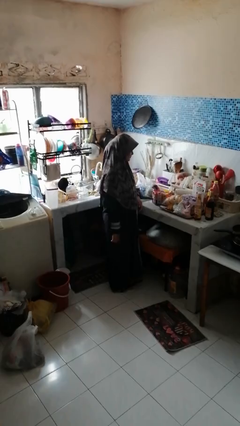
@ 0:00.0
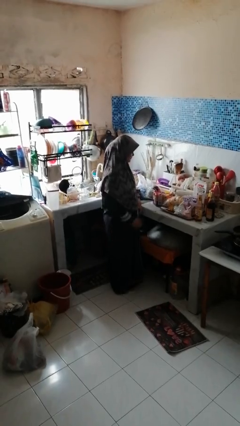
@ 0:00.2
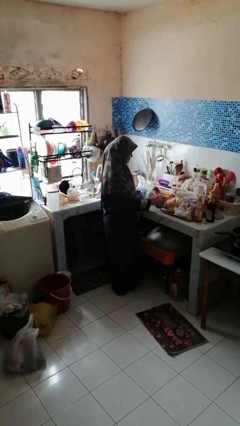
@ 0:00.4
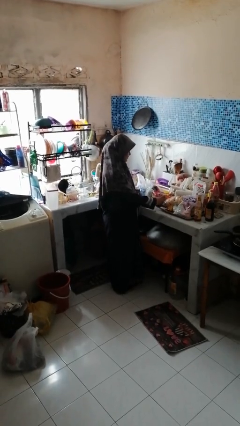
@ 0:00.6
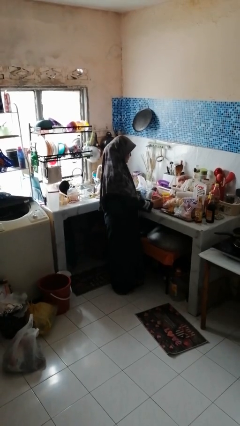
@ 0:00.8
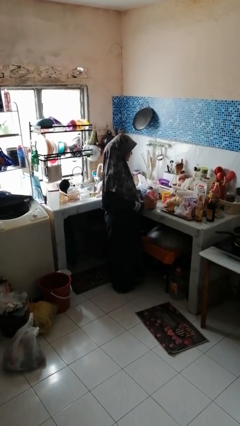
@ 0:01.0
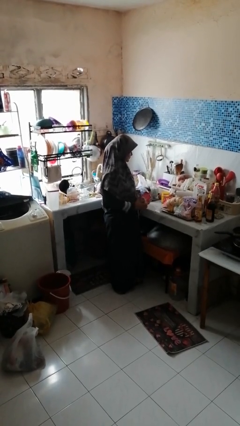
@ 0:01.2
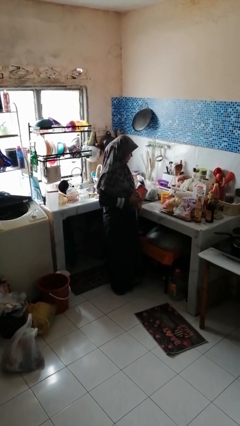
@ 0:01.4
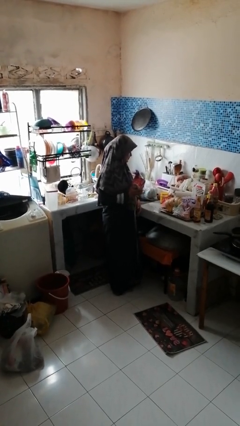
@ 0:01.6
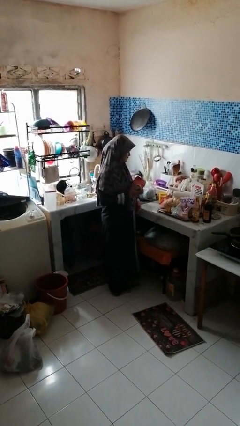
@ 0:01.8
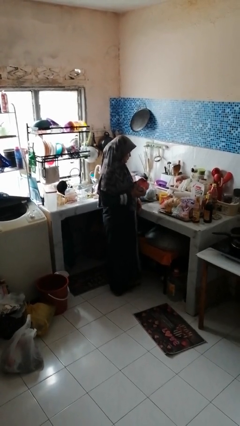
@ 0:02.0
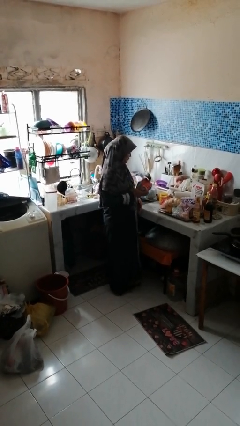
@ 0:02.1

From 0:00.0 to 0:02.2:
person picks up object from countertop

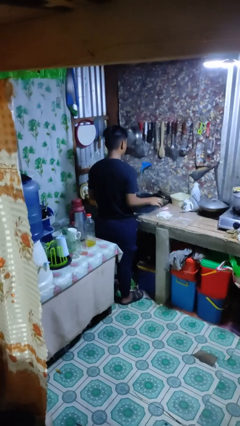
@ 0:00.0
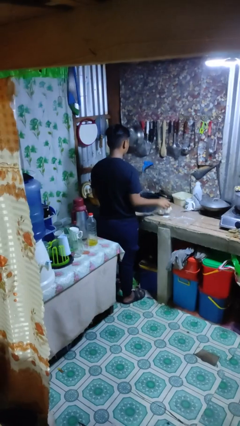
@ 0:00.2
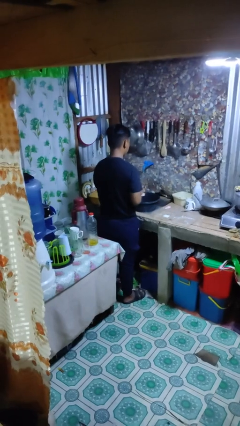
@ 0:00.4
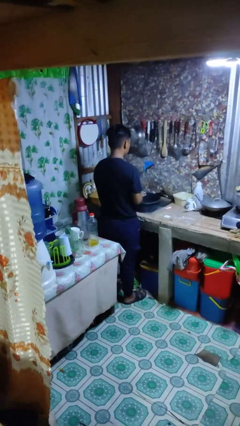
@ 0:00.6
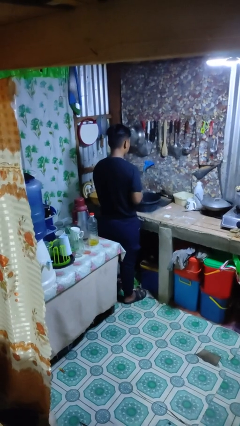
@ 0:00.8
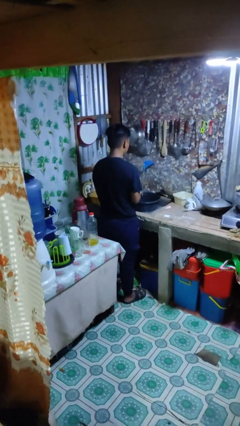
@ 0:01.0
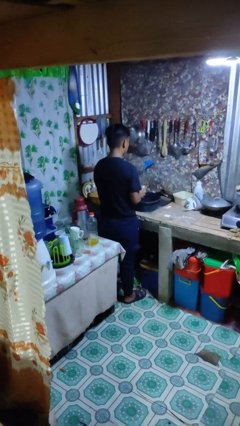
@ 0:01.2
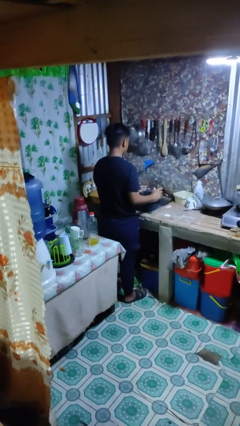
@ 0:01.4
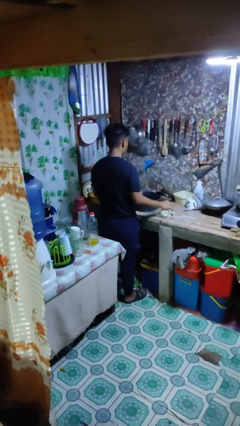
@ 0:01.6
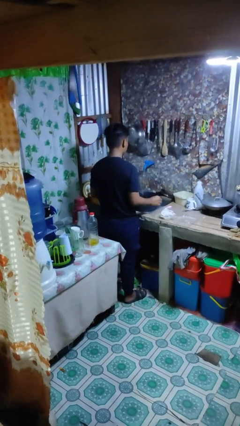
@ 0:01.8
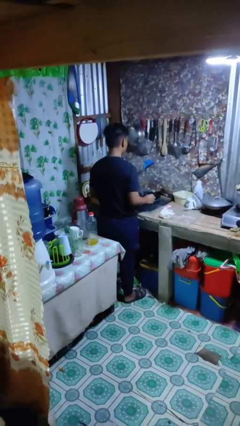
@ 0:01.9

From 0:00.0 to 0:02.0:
person dries hands with towel

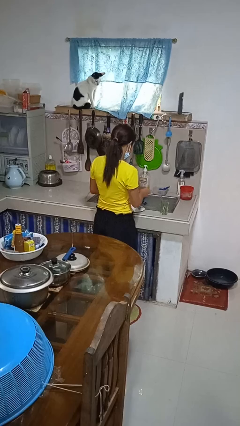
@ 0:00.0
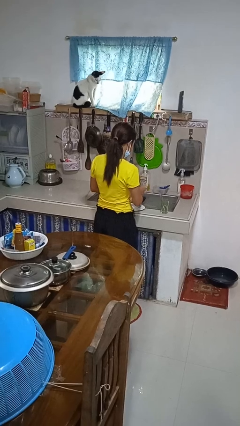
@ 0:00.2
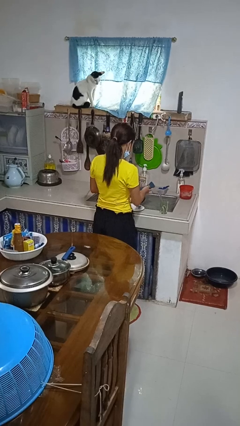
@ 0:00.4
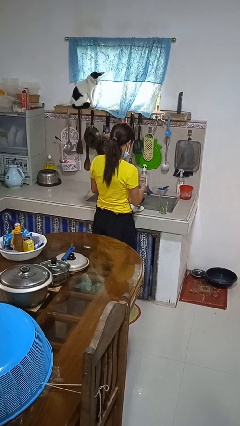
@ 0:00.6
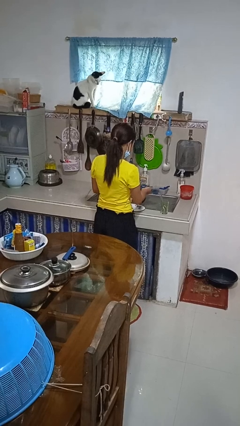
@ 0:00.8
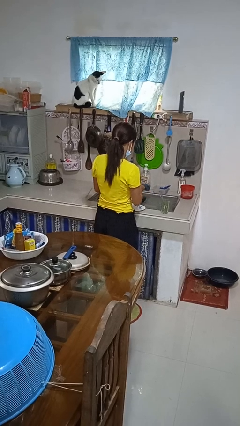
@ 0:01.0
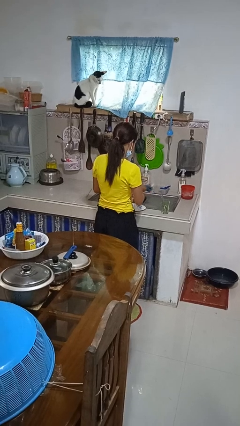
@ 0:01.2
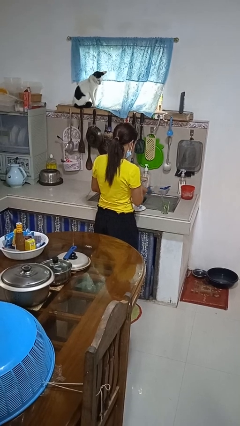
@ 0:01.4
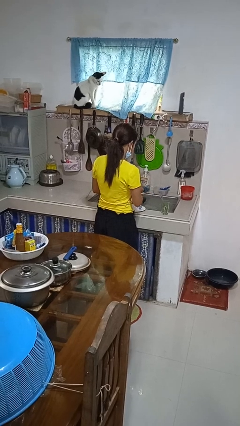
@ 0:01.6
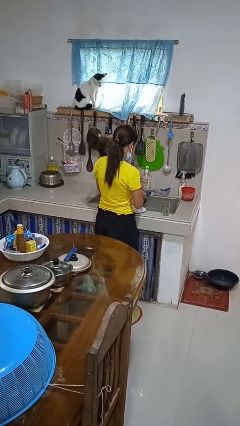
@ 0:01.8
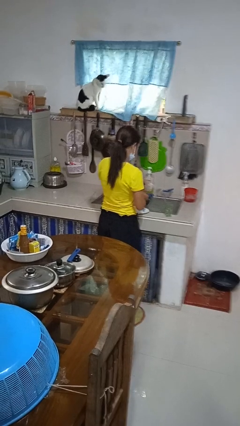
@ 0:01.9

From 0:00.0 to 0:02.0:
person dries dish

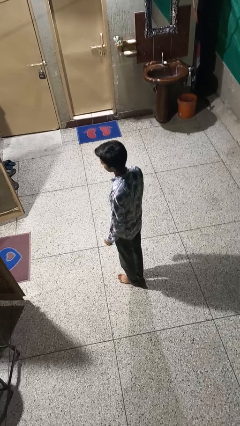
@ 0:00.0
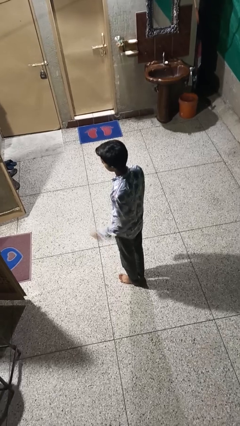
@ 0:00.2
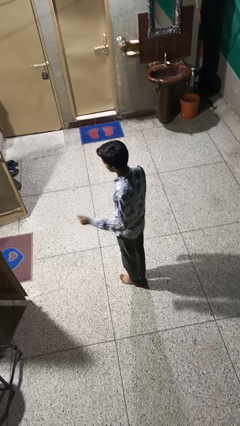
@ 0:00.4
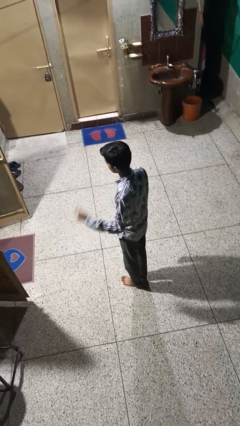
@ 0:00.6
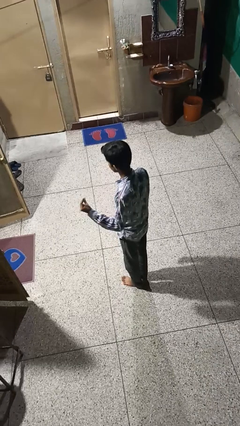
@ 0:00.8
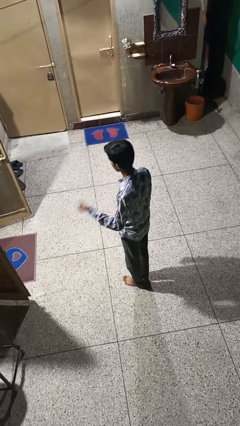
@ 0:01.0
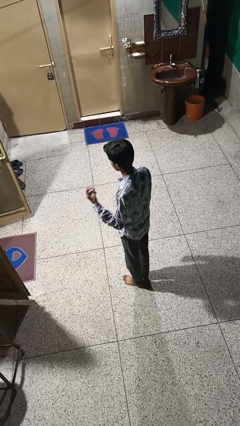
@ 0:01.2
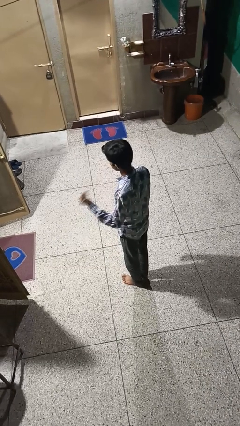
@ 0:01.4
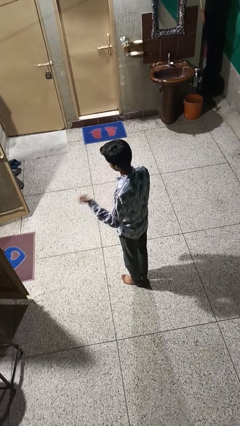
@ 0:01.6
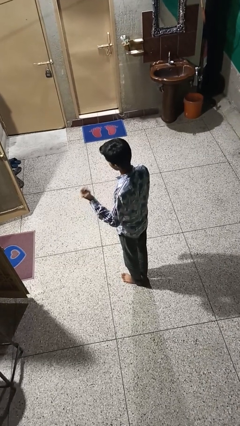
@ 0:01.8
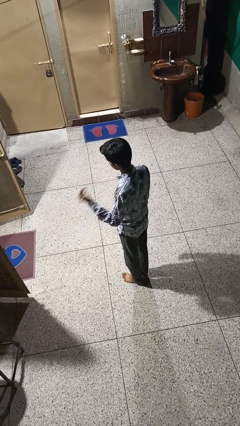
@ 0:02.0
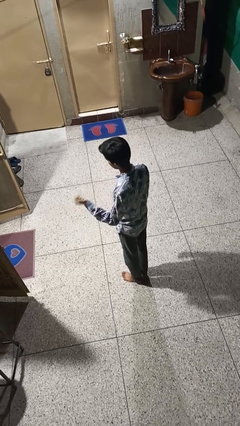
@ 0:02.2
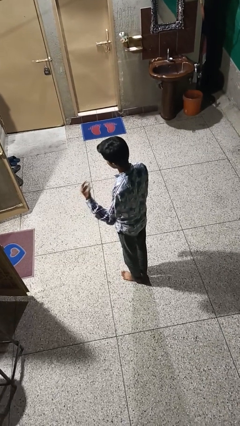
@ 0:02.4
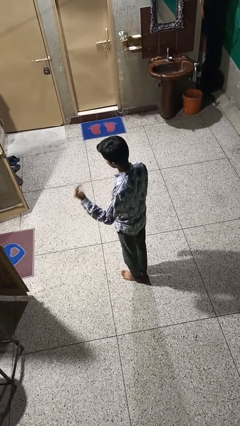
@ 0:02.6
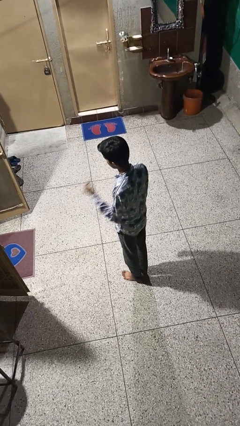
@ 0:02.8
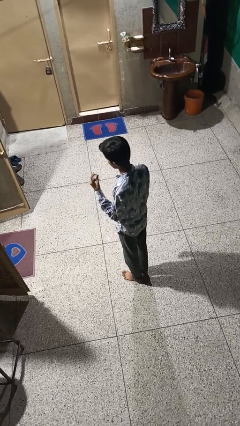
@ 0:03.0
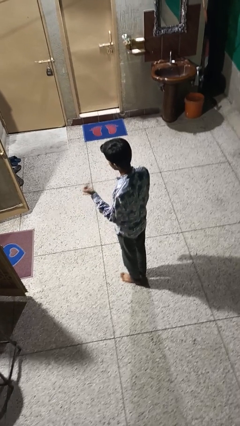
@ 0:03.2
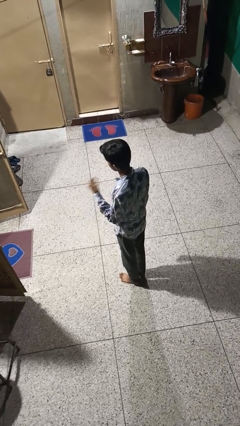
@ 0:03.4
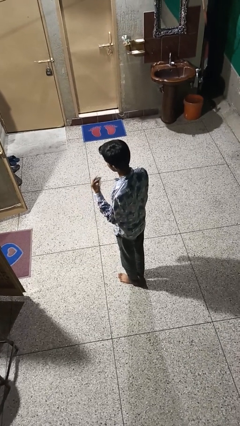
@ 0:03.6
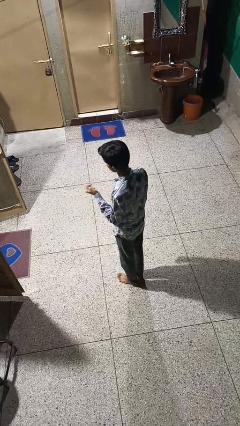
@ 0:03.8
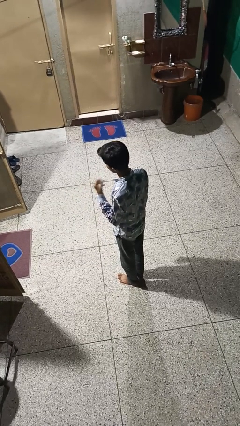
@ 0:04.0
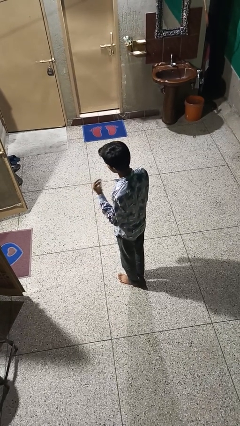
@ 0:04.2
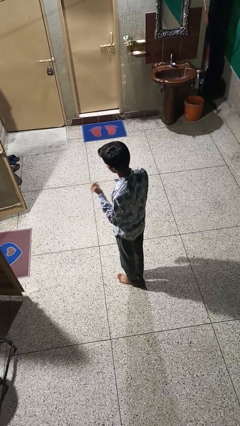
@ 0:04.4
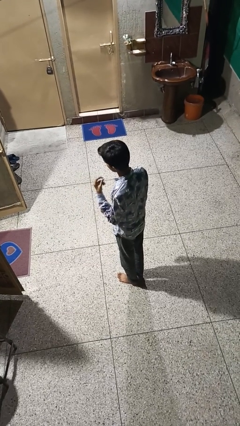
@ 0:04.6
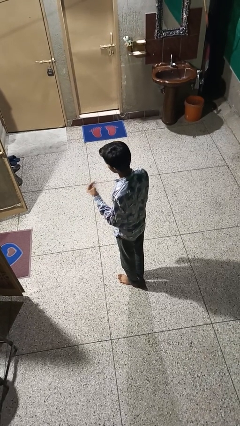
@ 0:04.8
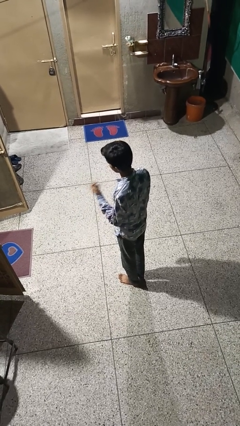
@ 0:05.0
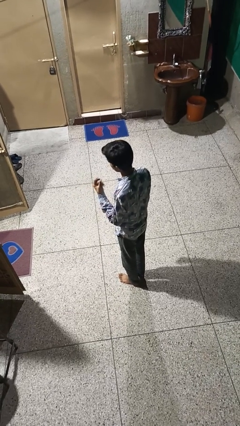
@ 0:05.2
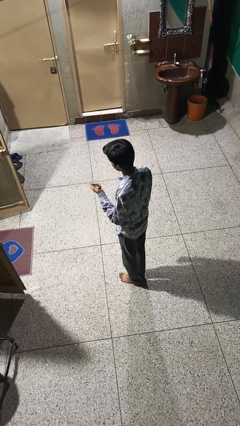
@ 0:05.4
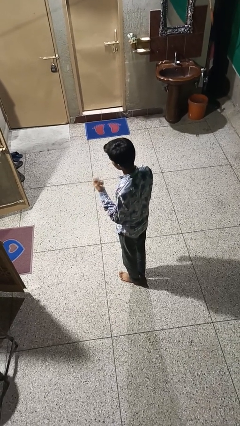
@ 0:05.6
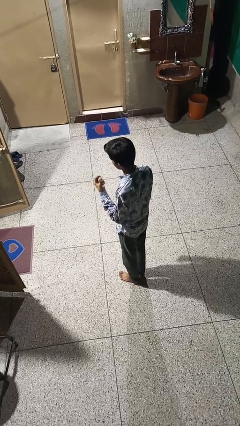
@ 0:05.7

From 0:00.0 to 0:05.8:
person snaps fingers

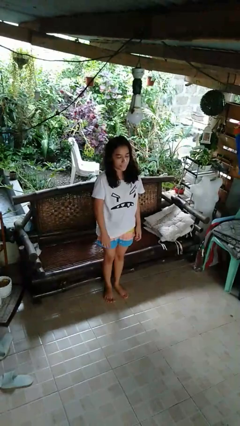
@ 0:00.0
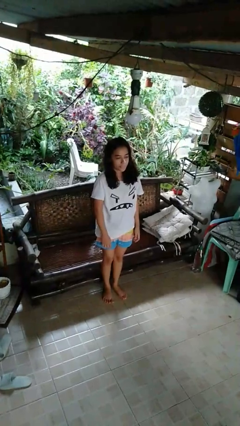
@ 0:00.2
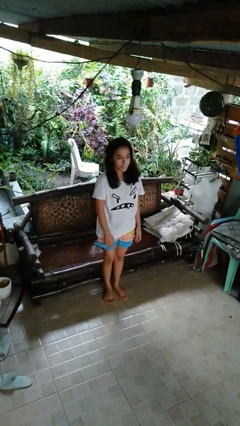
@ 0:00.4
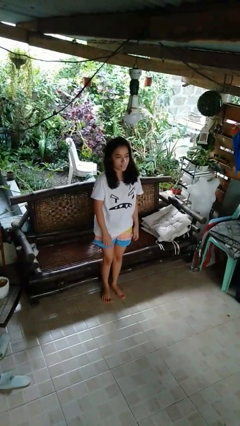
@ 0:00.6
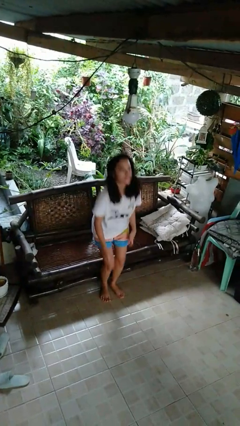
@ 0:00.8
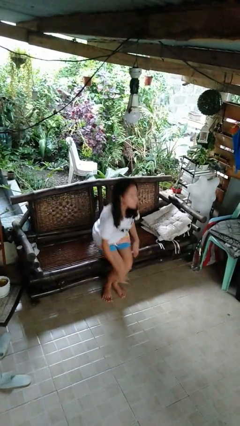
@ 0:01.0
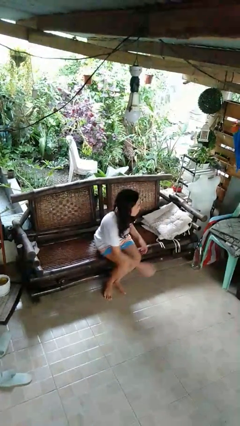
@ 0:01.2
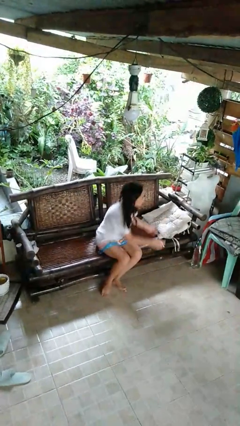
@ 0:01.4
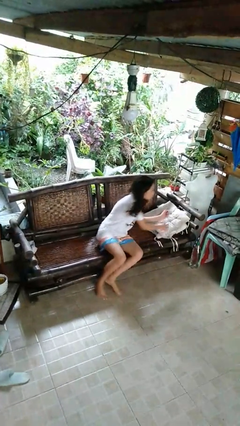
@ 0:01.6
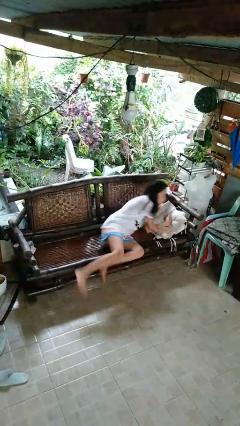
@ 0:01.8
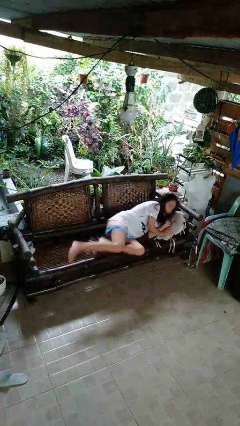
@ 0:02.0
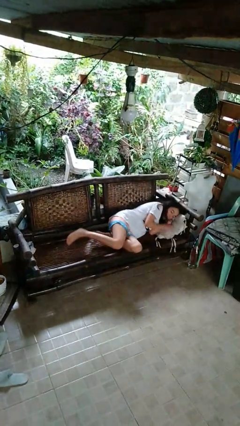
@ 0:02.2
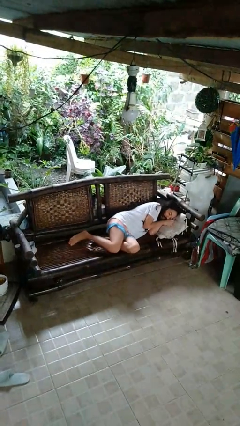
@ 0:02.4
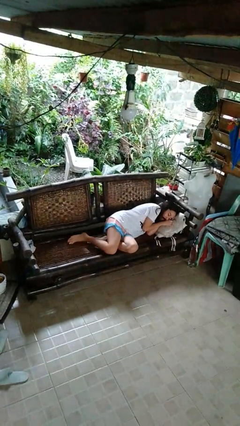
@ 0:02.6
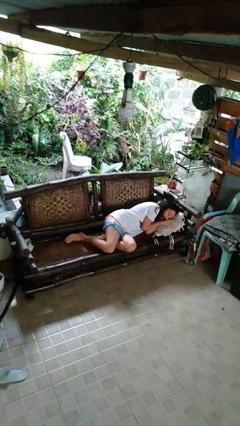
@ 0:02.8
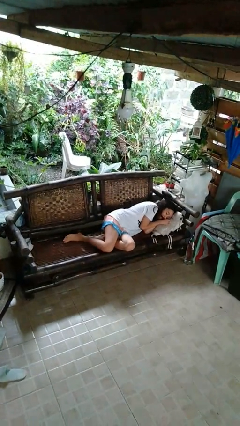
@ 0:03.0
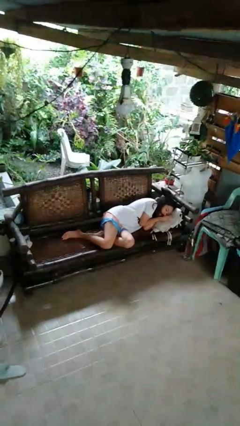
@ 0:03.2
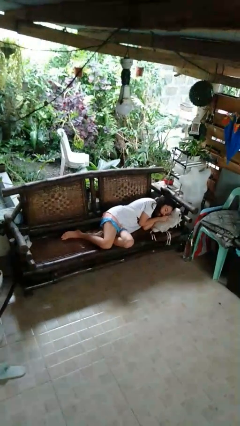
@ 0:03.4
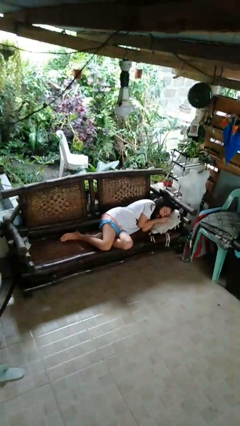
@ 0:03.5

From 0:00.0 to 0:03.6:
person lies down on couch

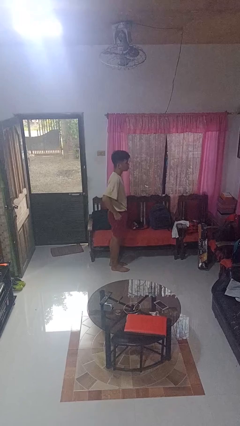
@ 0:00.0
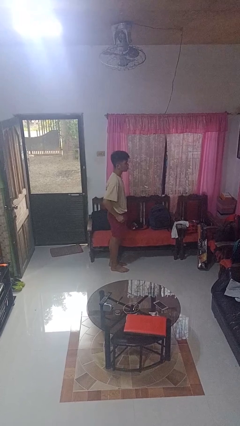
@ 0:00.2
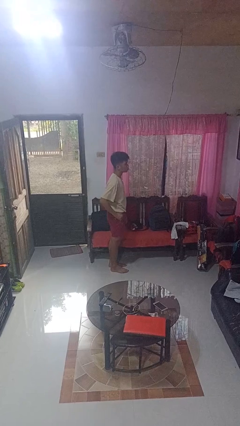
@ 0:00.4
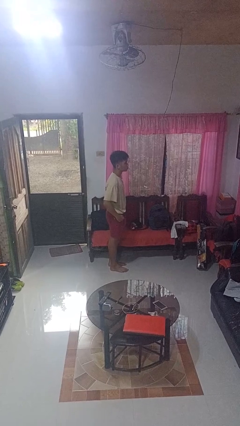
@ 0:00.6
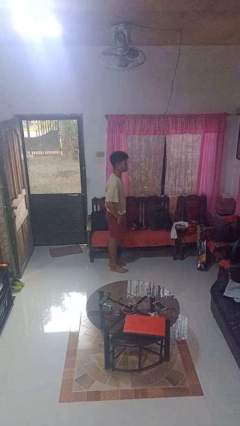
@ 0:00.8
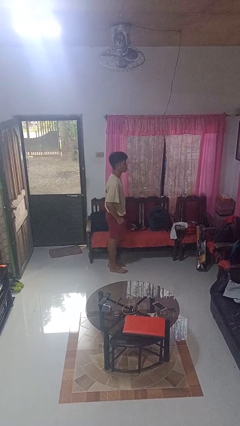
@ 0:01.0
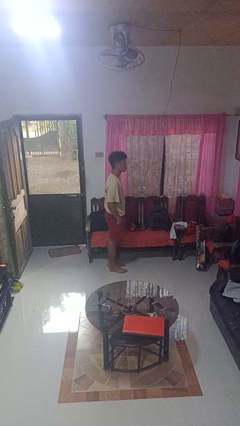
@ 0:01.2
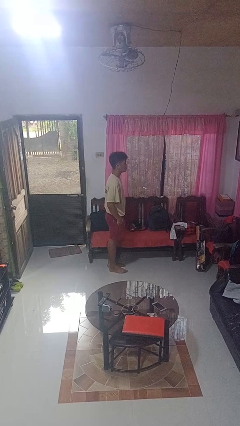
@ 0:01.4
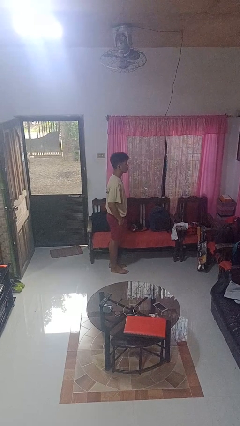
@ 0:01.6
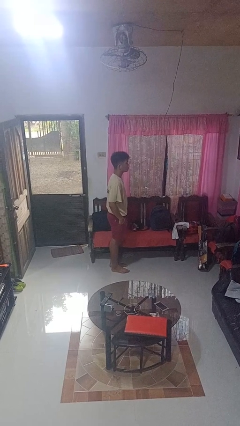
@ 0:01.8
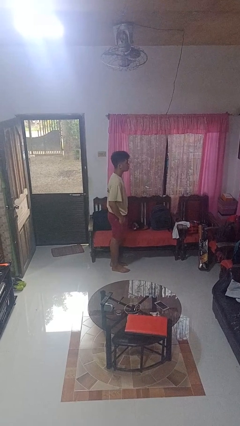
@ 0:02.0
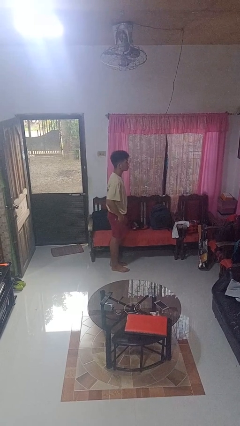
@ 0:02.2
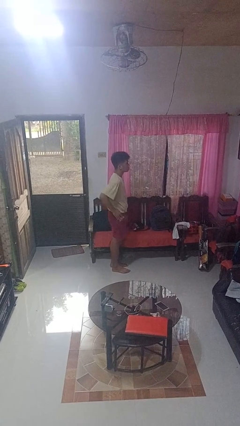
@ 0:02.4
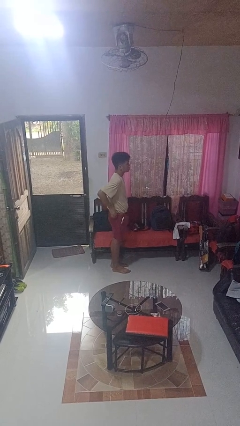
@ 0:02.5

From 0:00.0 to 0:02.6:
person puts hands in back pockets
